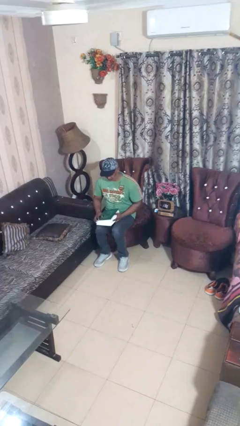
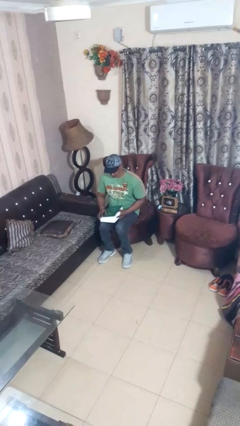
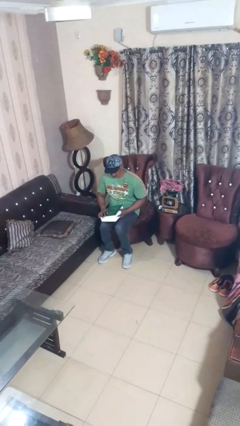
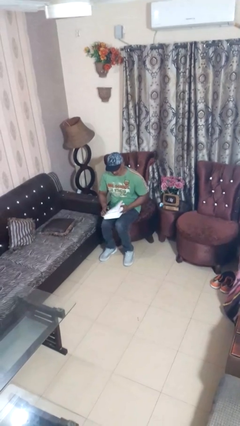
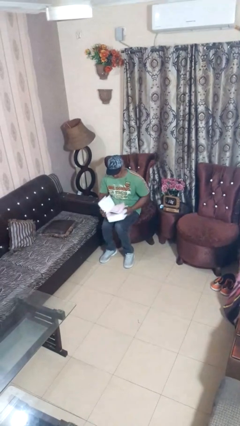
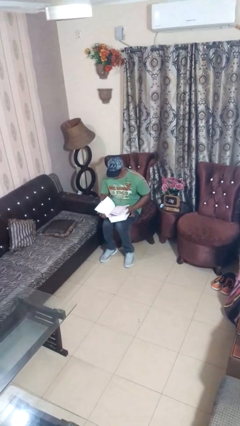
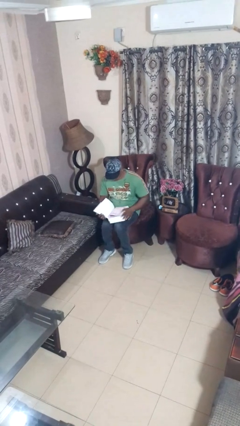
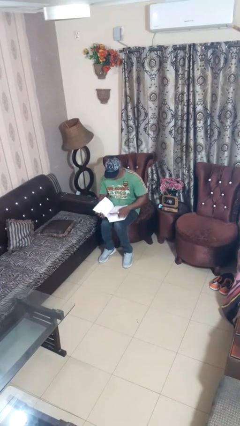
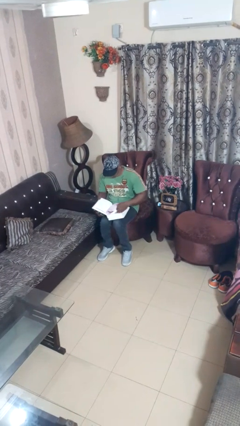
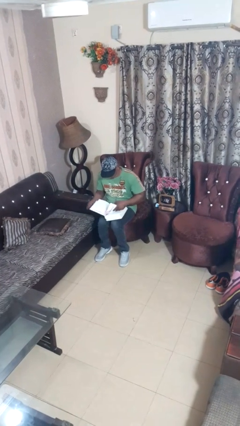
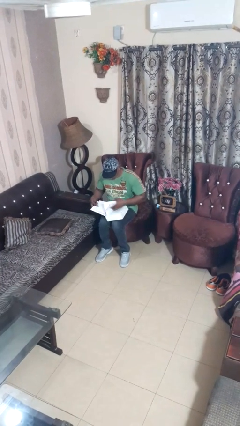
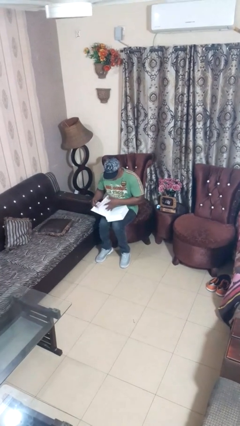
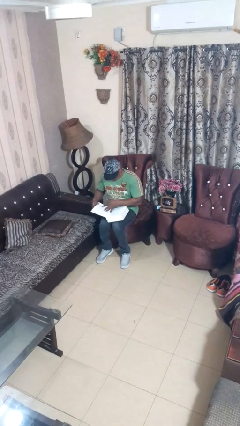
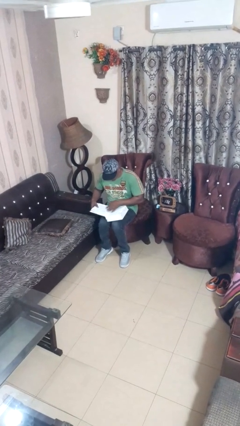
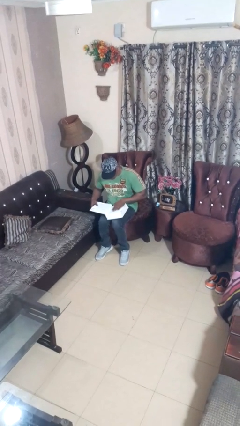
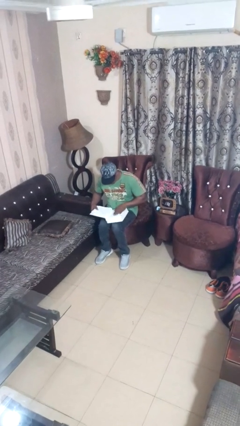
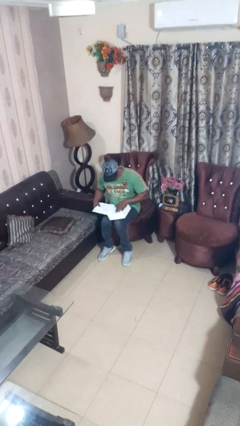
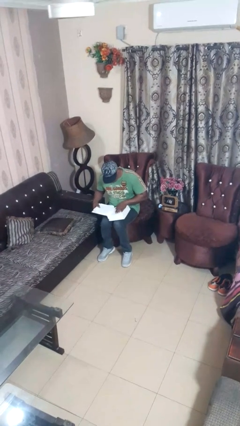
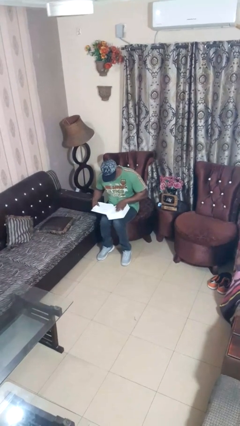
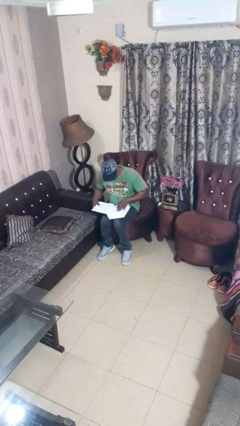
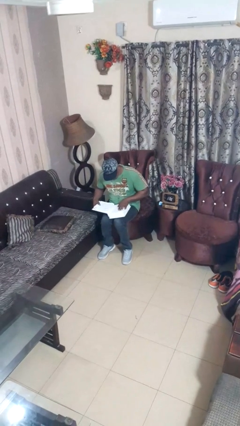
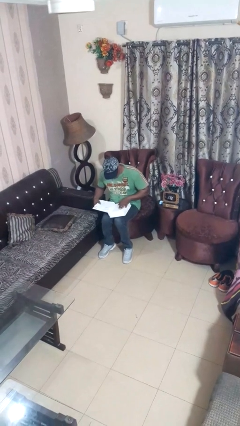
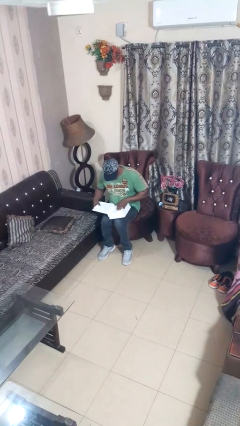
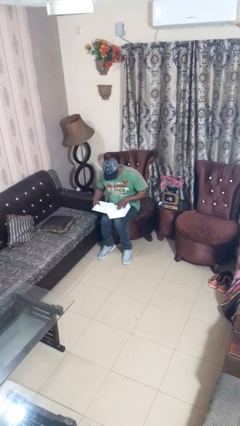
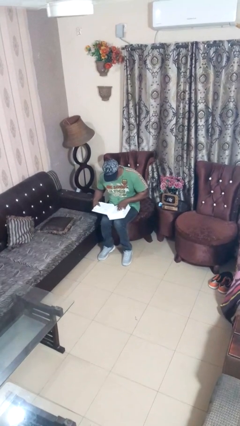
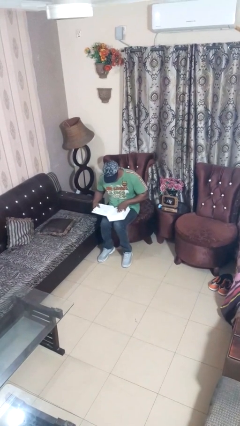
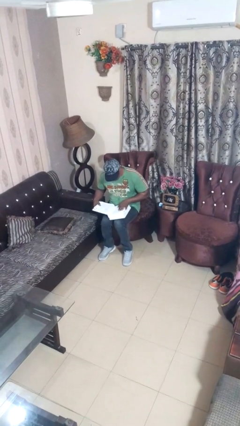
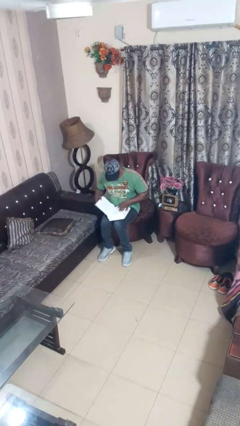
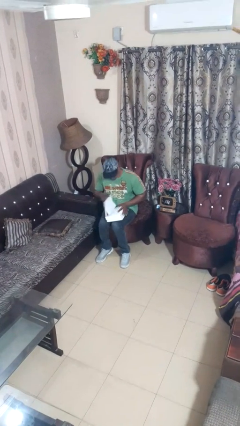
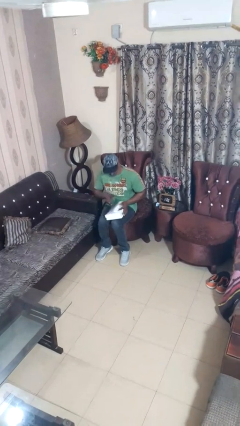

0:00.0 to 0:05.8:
person reads book

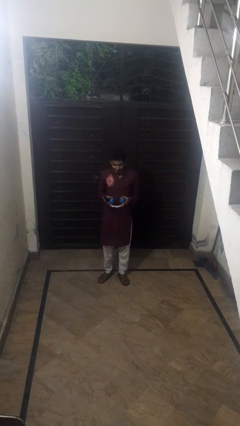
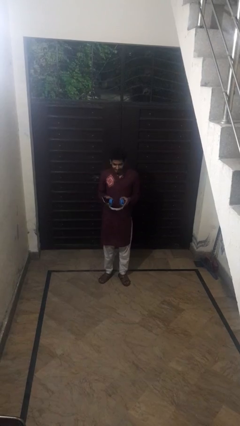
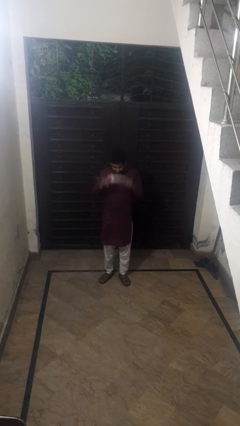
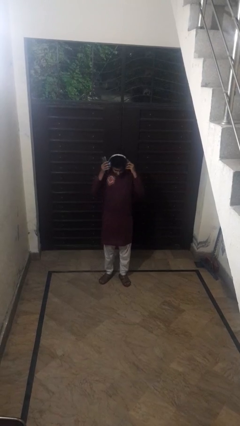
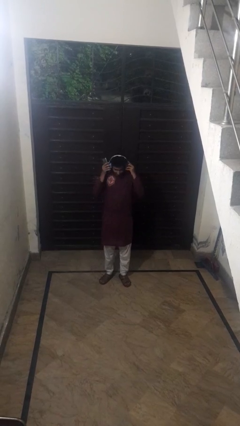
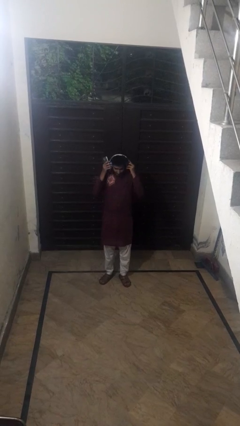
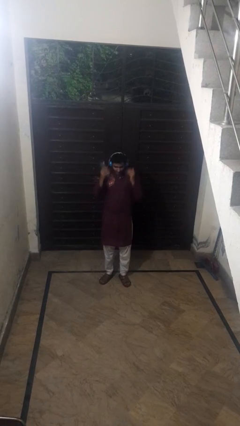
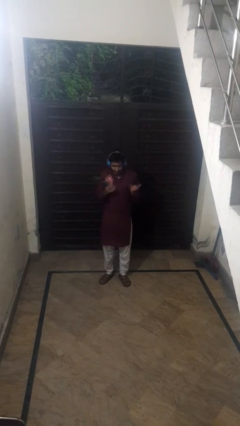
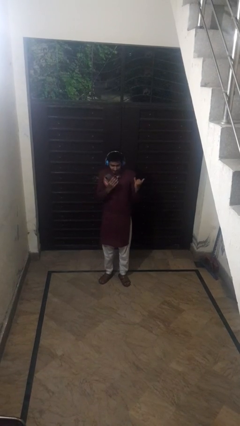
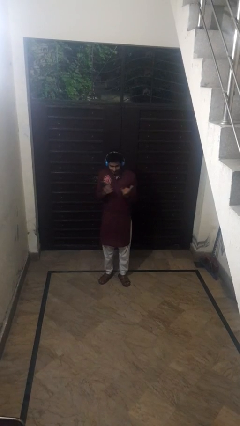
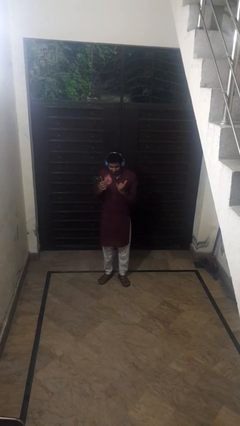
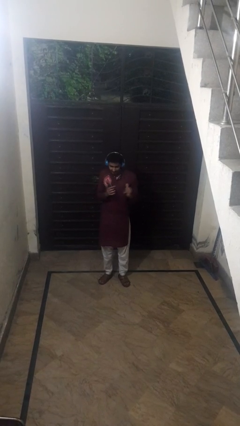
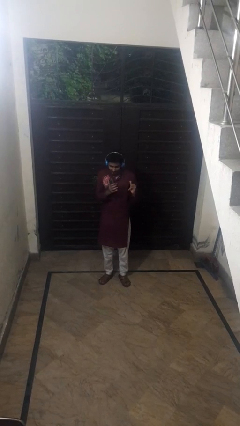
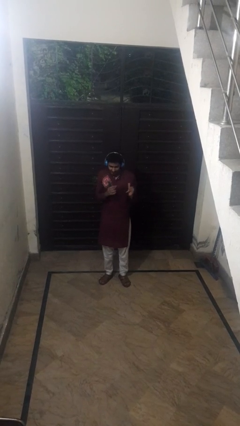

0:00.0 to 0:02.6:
person puts on headphones

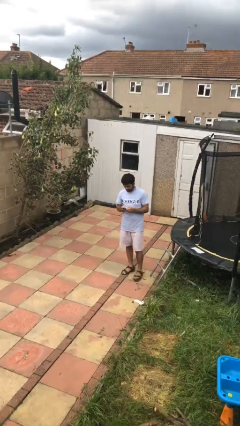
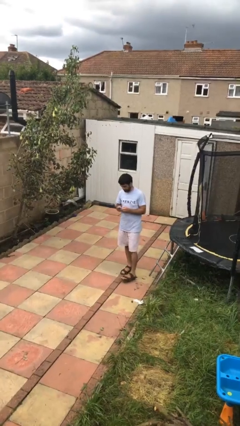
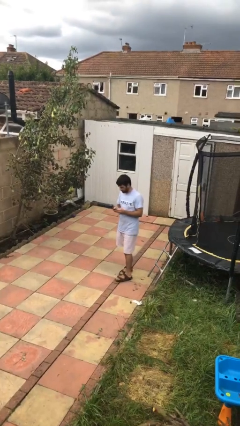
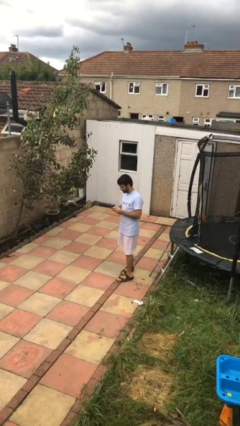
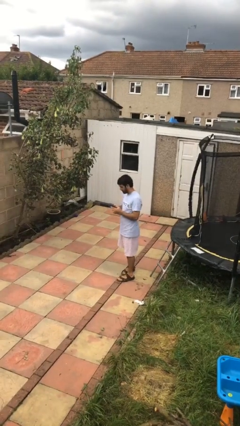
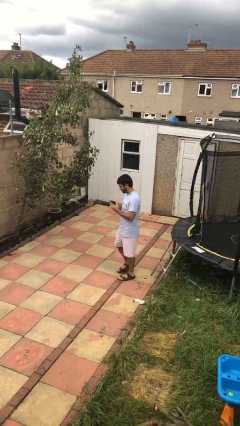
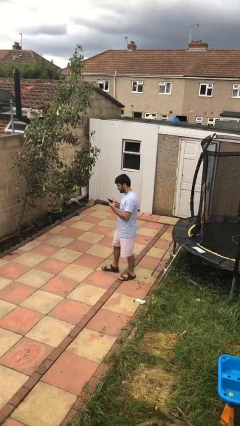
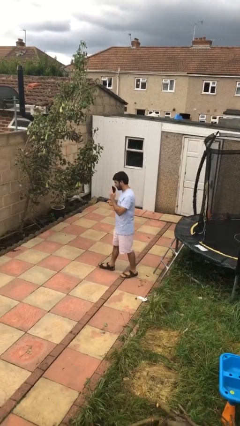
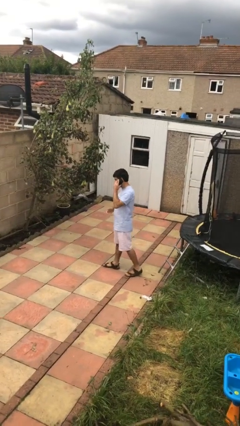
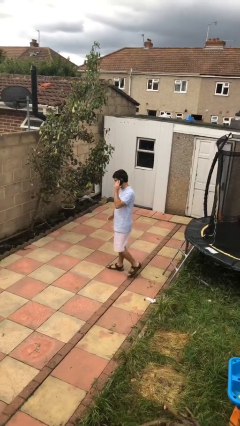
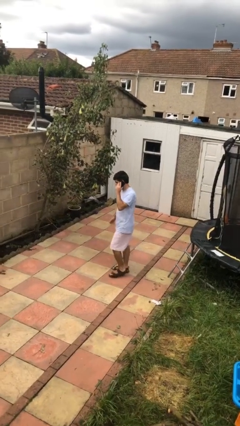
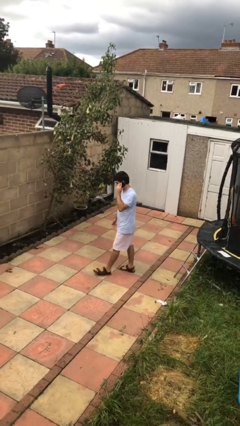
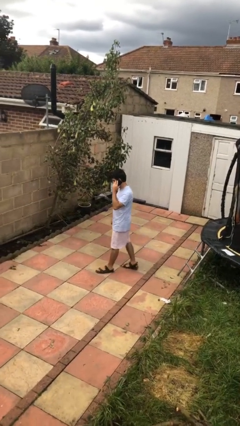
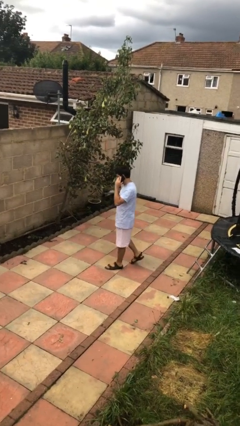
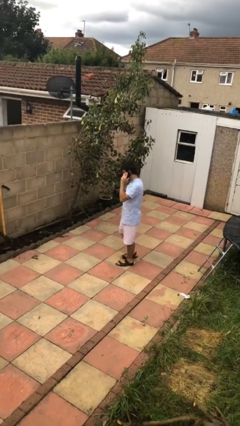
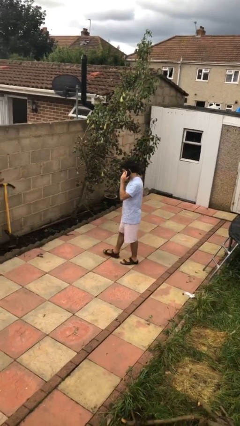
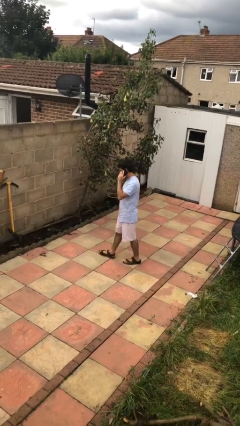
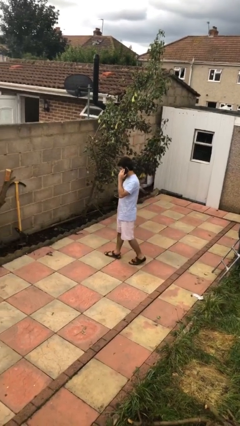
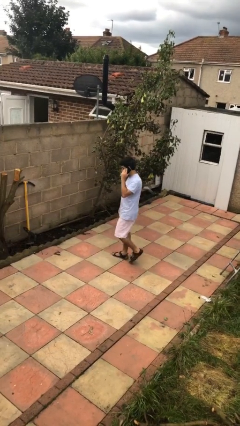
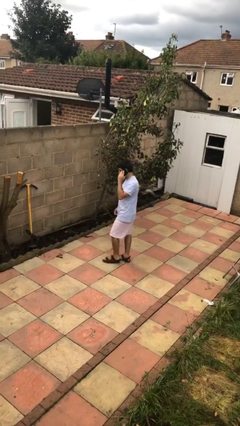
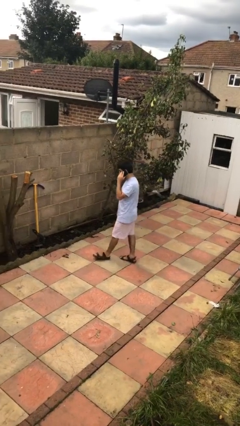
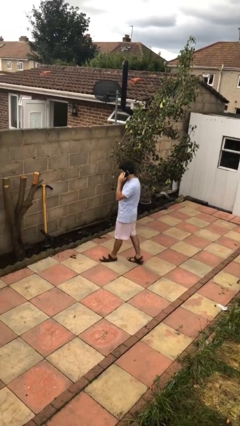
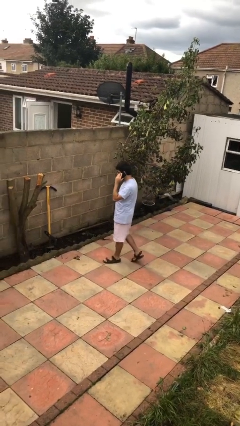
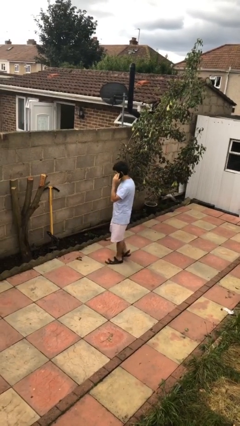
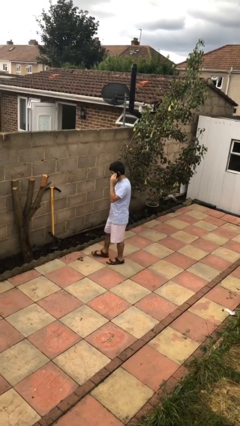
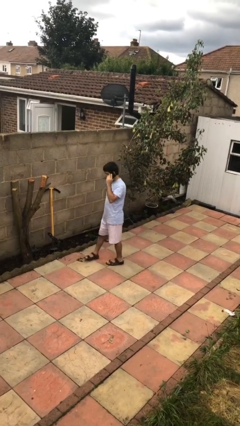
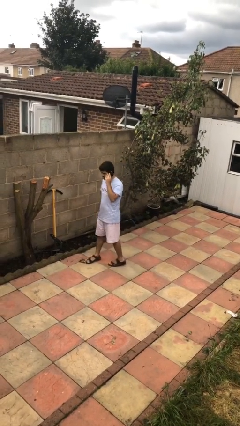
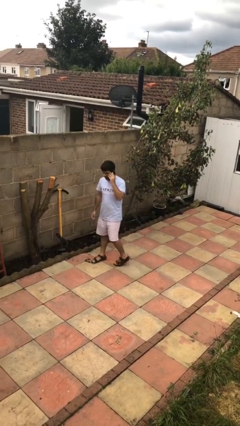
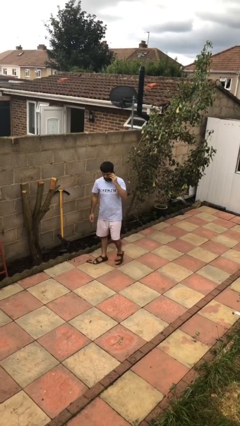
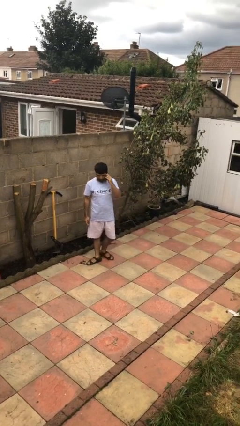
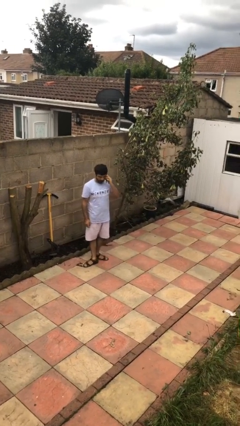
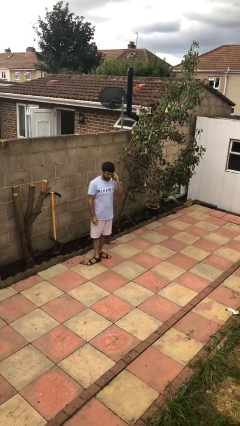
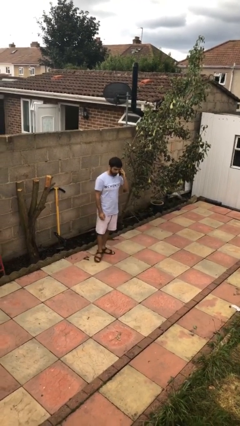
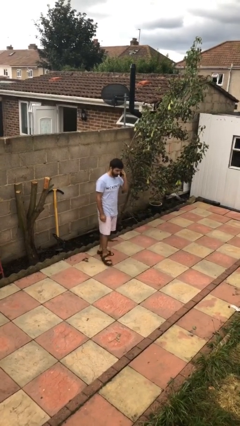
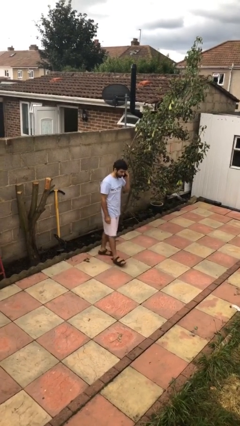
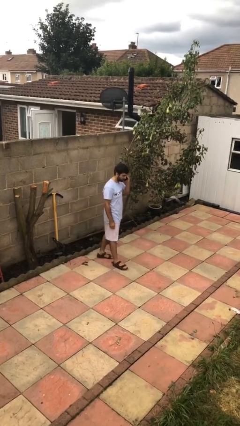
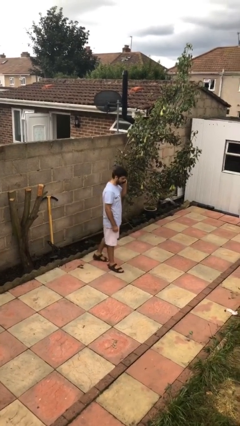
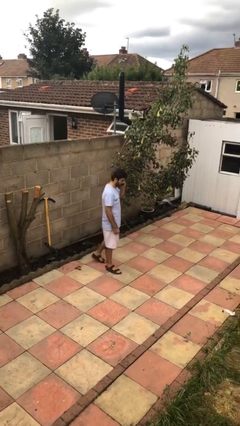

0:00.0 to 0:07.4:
person talks on phone

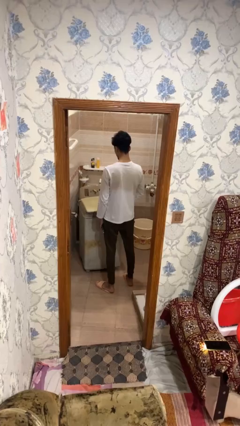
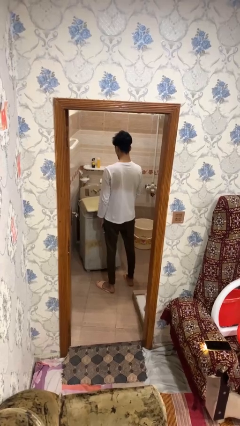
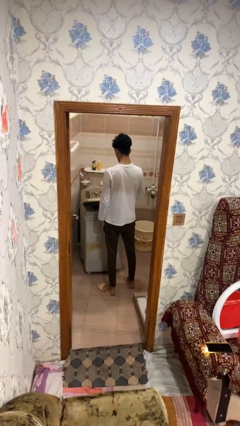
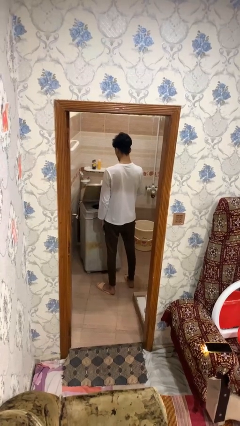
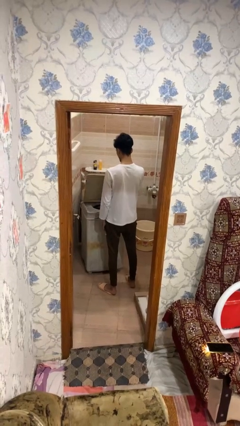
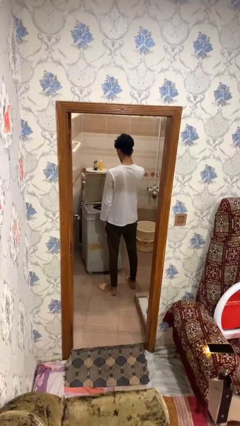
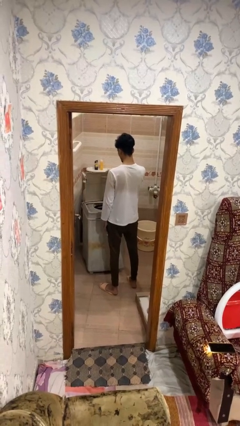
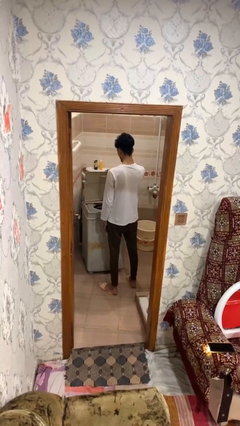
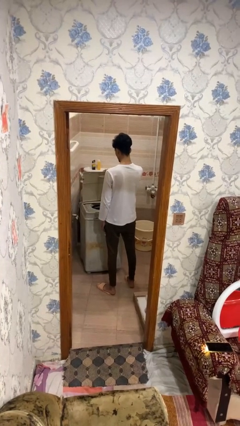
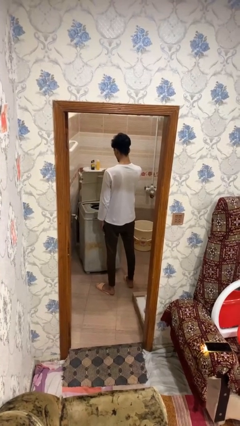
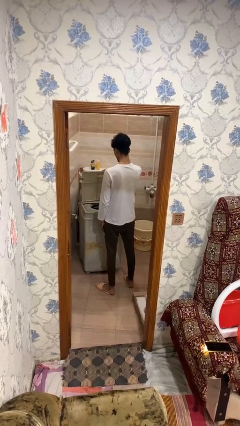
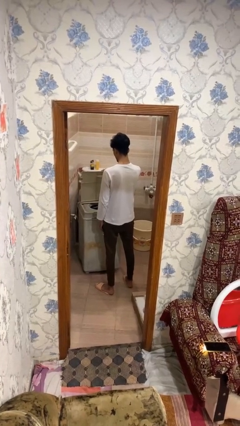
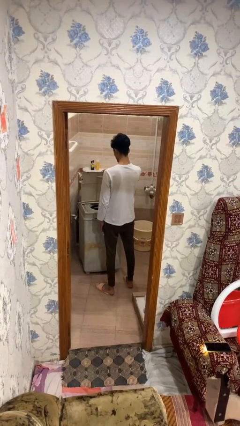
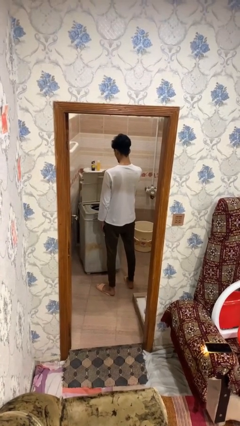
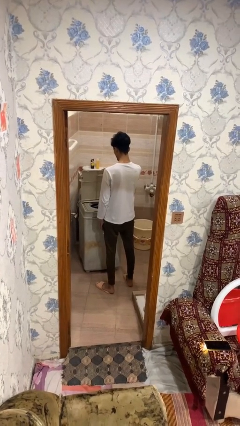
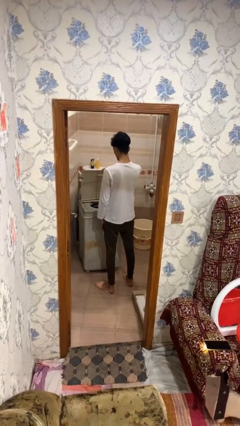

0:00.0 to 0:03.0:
person opens clothes washer
